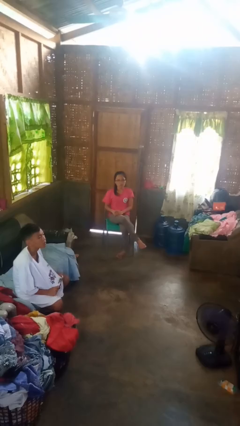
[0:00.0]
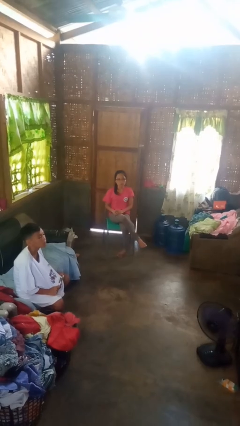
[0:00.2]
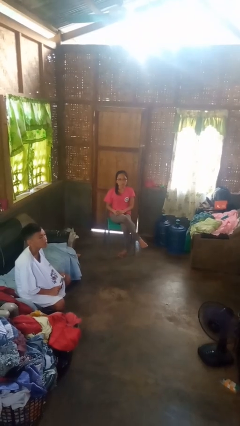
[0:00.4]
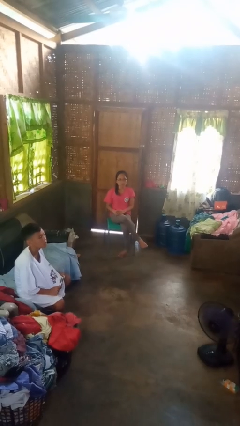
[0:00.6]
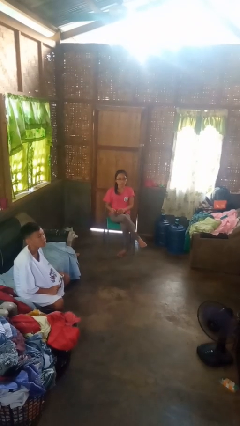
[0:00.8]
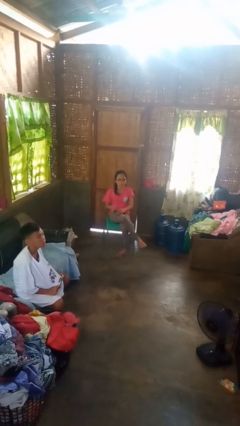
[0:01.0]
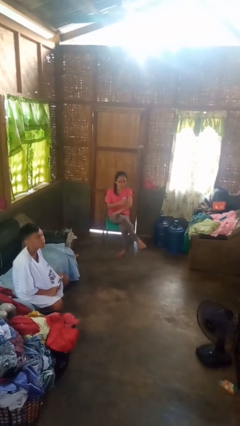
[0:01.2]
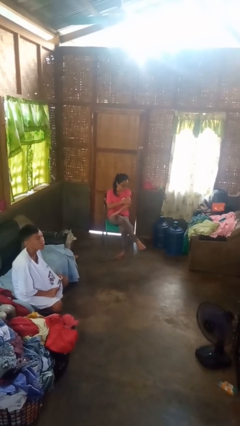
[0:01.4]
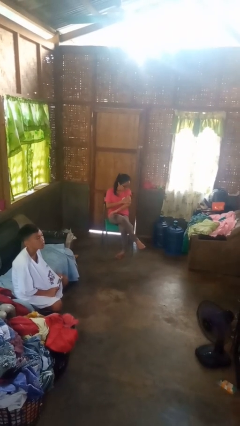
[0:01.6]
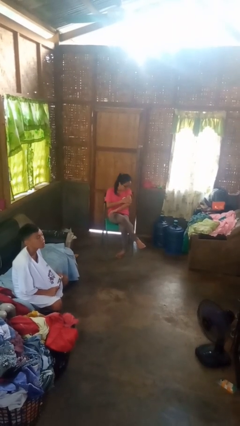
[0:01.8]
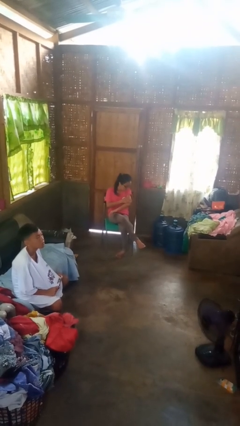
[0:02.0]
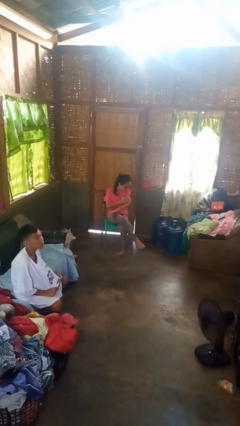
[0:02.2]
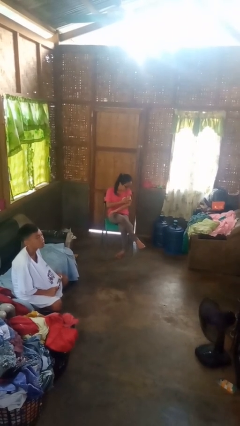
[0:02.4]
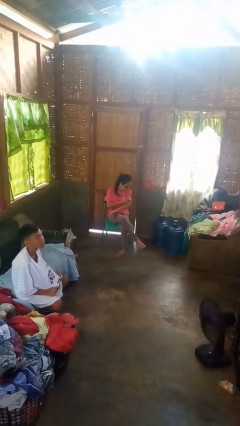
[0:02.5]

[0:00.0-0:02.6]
person swats bug

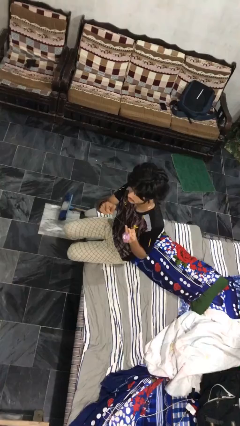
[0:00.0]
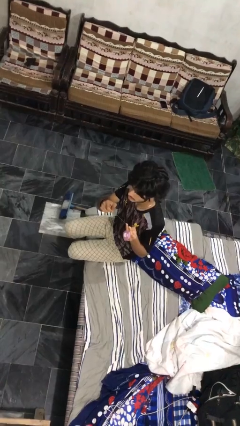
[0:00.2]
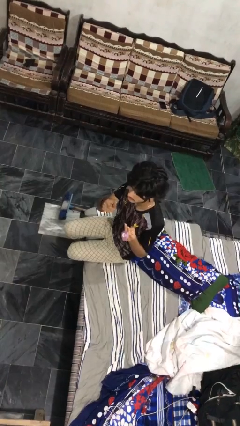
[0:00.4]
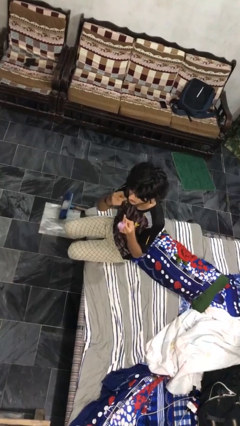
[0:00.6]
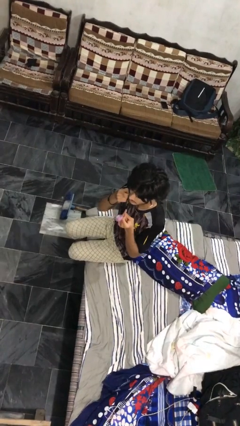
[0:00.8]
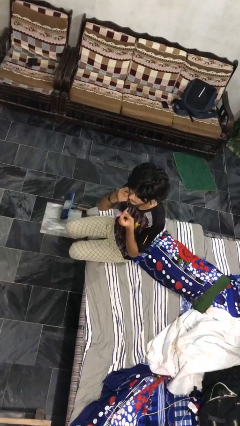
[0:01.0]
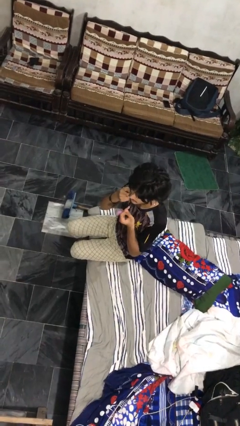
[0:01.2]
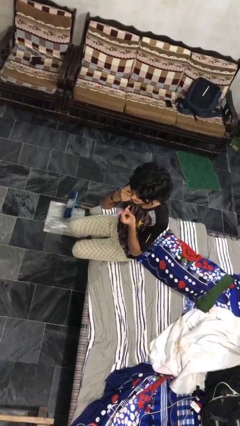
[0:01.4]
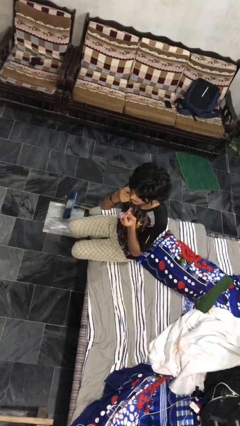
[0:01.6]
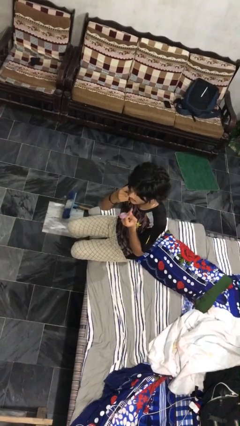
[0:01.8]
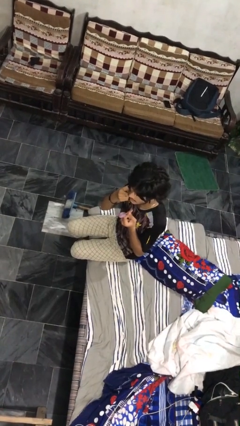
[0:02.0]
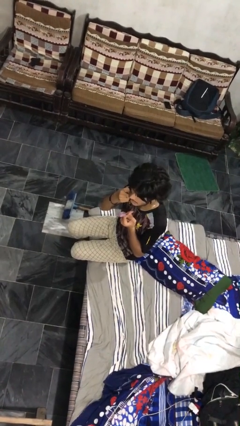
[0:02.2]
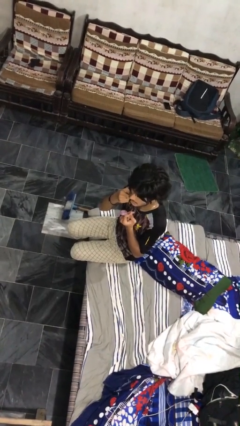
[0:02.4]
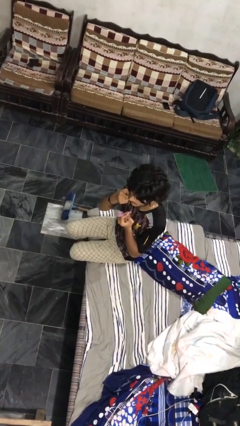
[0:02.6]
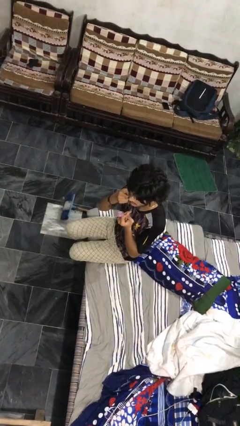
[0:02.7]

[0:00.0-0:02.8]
person flosses

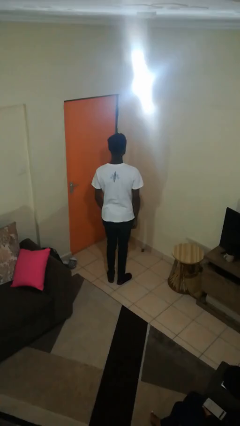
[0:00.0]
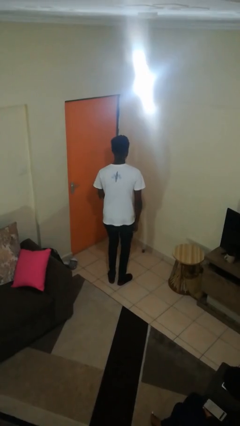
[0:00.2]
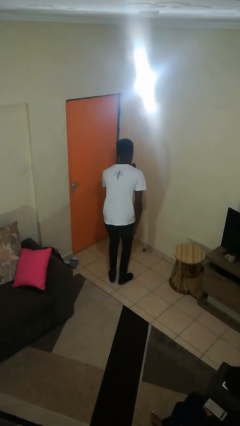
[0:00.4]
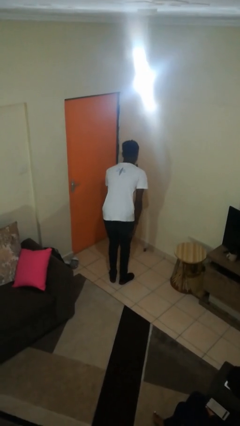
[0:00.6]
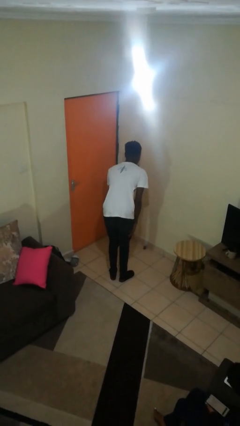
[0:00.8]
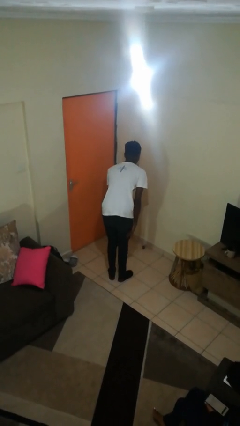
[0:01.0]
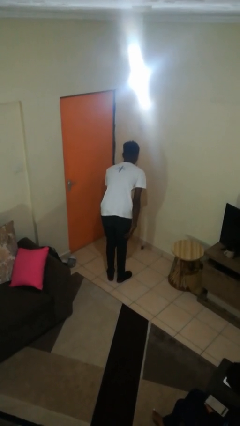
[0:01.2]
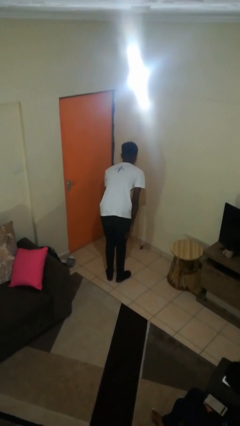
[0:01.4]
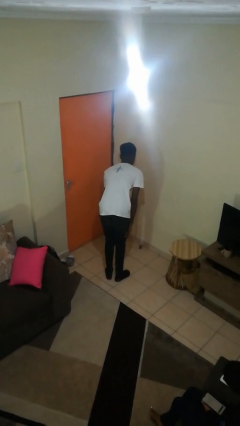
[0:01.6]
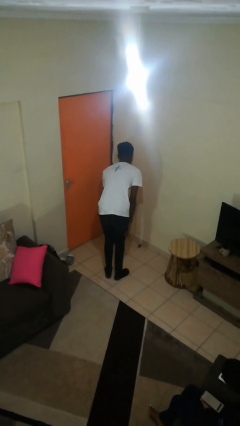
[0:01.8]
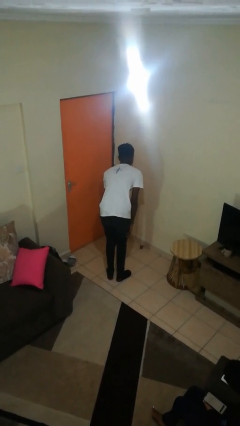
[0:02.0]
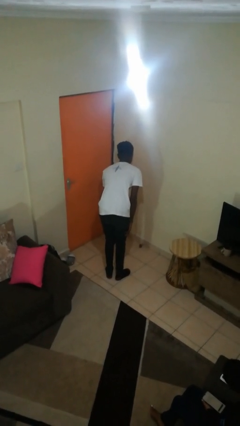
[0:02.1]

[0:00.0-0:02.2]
person gestures be quiet

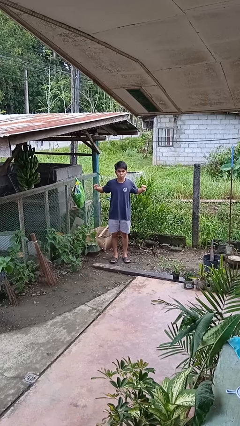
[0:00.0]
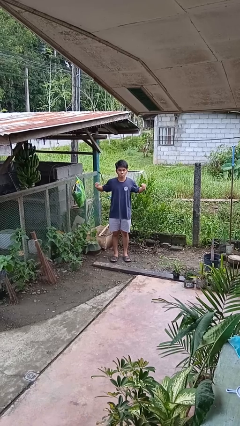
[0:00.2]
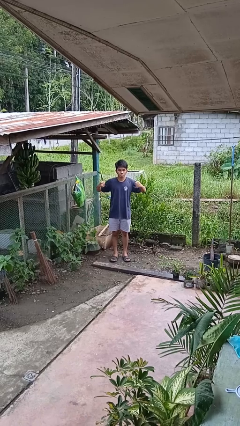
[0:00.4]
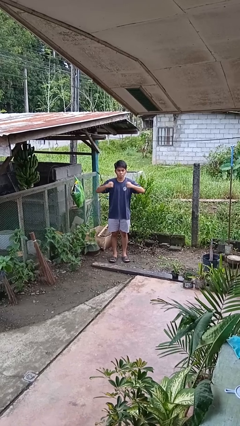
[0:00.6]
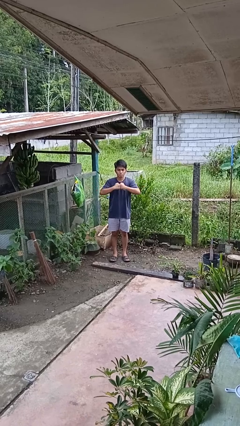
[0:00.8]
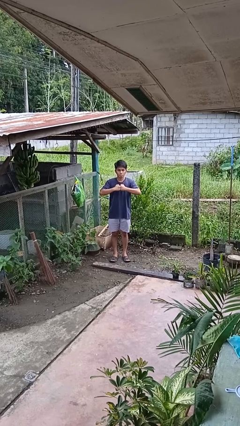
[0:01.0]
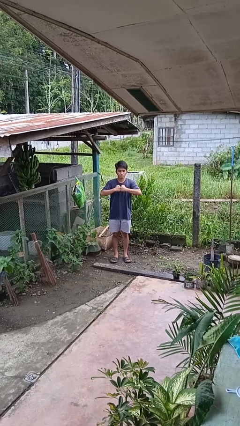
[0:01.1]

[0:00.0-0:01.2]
person gestures zoom out

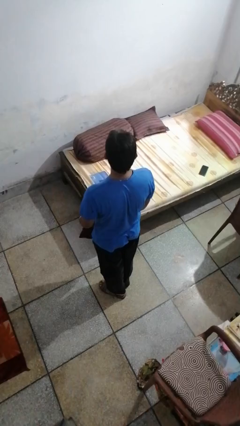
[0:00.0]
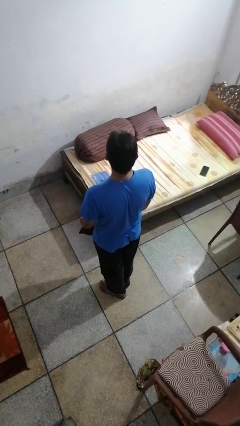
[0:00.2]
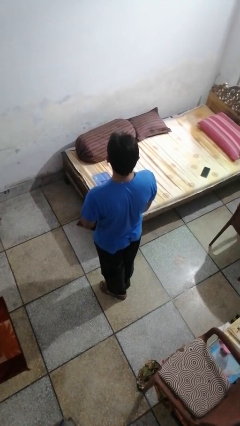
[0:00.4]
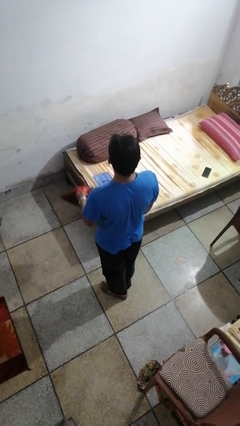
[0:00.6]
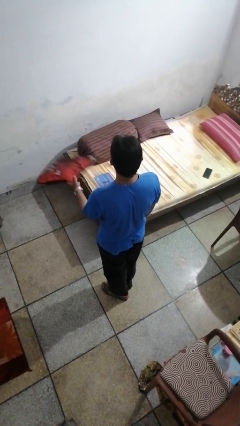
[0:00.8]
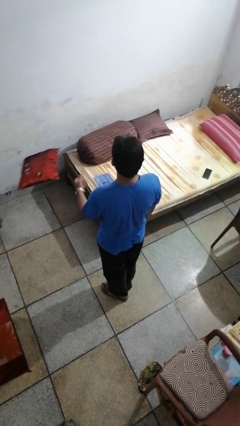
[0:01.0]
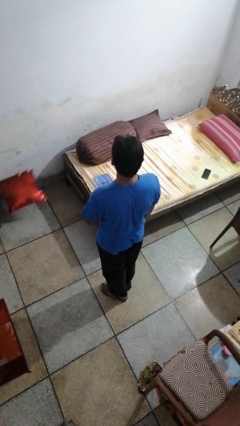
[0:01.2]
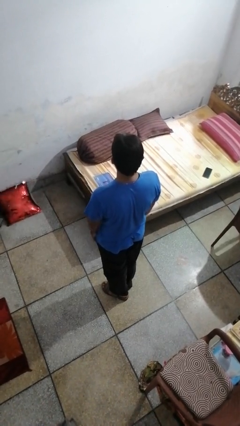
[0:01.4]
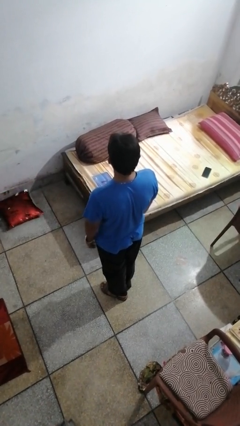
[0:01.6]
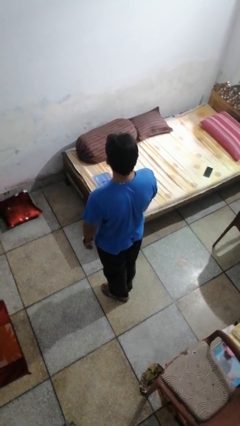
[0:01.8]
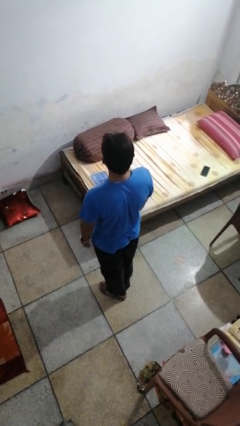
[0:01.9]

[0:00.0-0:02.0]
person throws object to ground

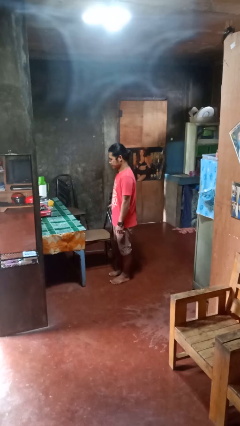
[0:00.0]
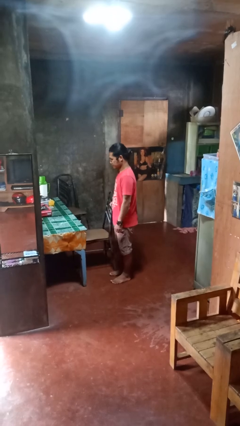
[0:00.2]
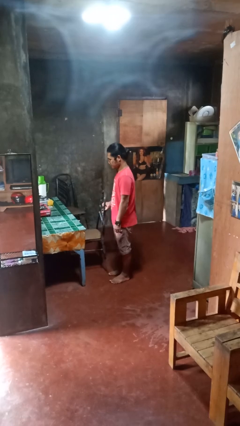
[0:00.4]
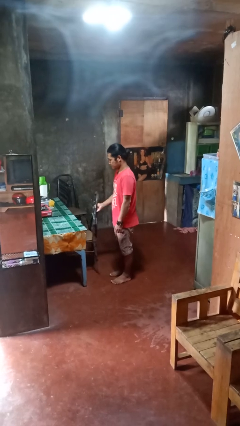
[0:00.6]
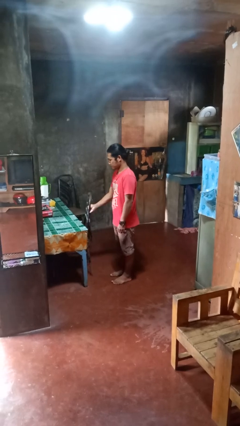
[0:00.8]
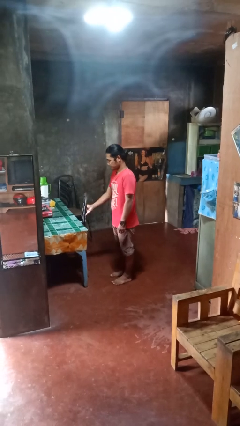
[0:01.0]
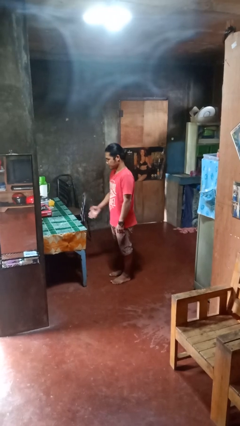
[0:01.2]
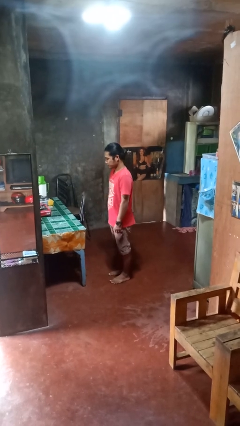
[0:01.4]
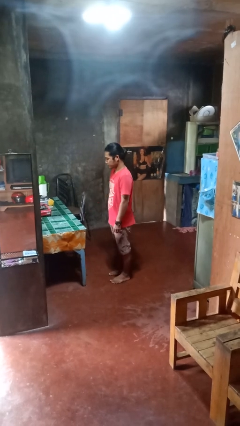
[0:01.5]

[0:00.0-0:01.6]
person pushes in chair

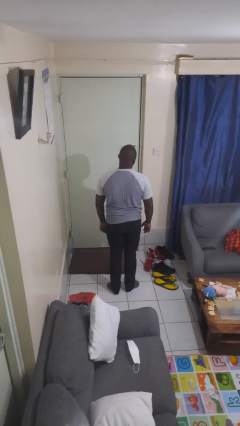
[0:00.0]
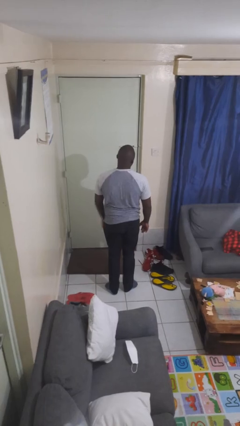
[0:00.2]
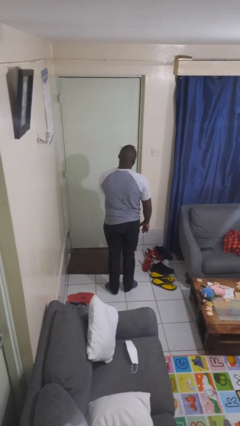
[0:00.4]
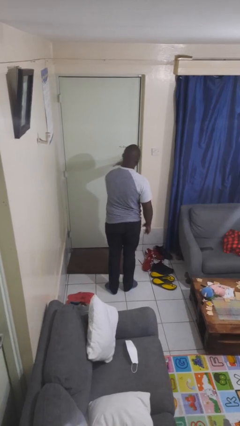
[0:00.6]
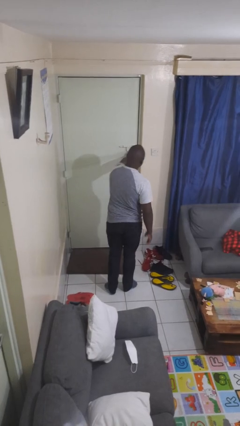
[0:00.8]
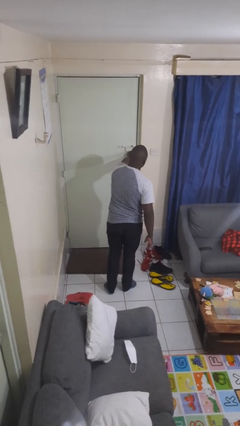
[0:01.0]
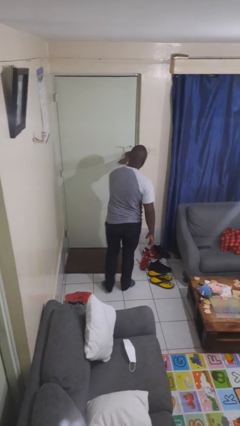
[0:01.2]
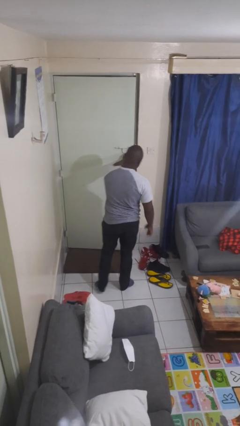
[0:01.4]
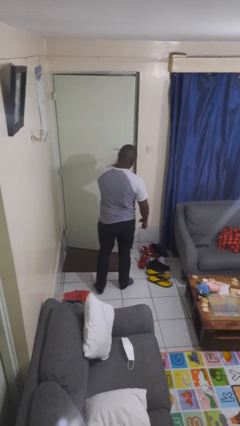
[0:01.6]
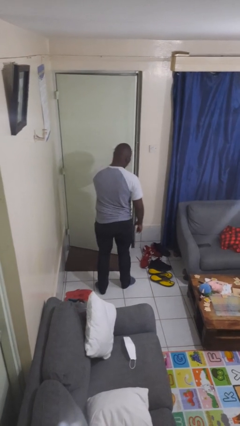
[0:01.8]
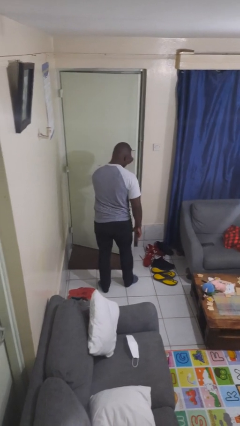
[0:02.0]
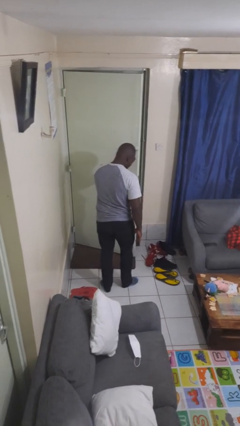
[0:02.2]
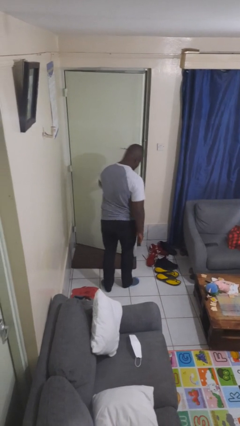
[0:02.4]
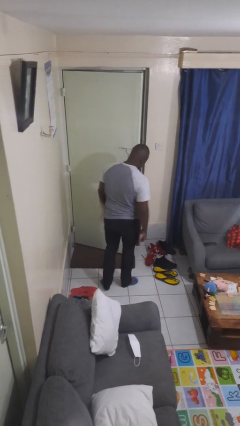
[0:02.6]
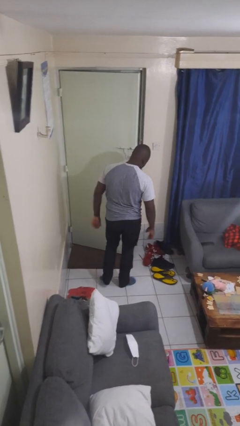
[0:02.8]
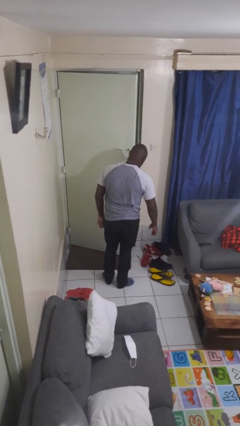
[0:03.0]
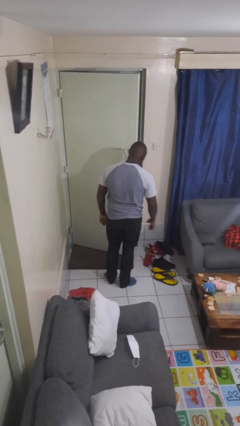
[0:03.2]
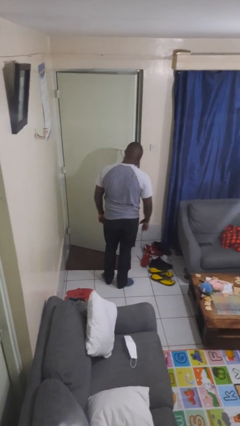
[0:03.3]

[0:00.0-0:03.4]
person opens facility door

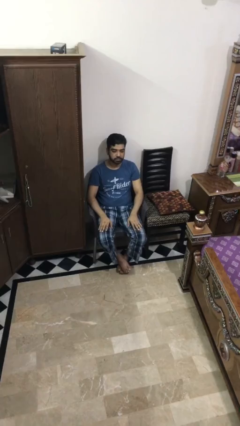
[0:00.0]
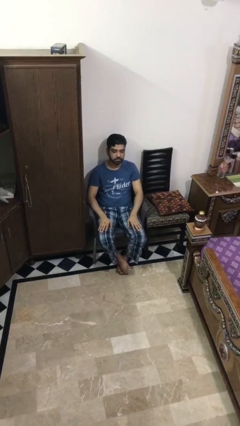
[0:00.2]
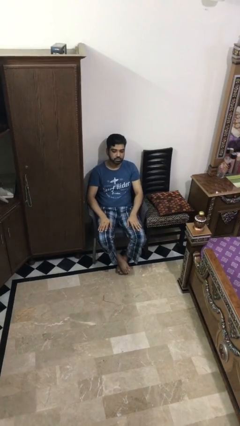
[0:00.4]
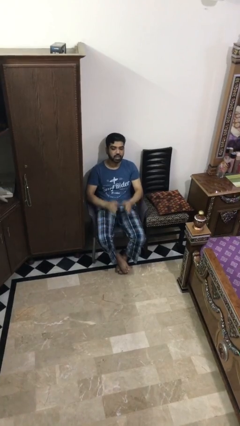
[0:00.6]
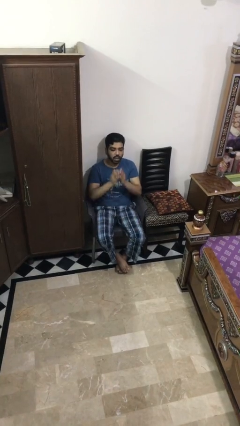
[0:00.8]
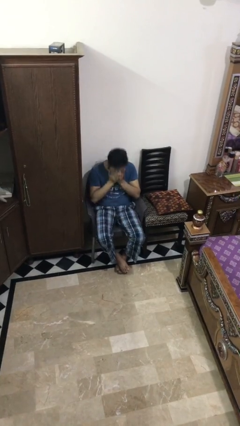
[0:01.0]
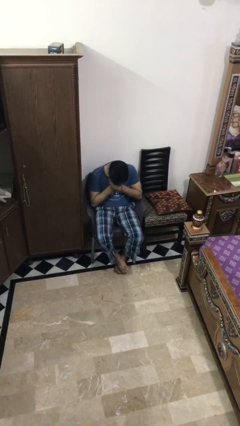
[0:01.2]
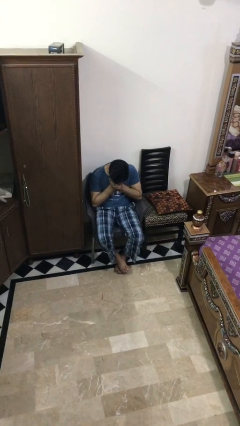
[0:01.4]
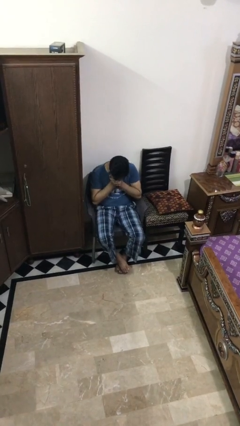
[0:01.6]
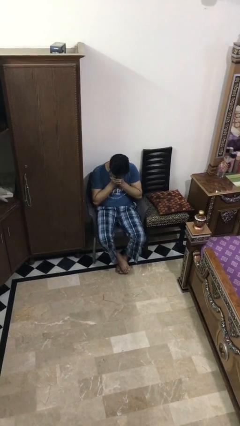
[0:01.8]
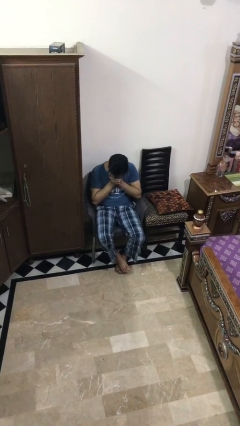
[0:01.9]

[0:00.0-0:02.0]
person sneezes into hand
